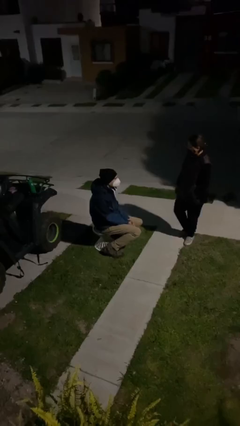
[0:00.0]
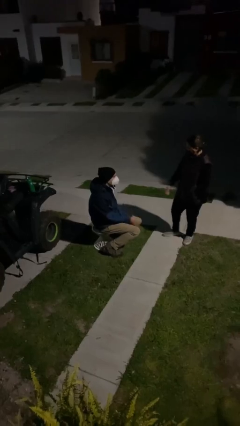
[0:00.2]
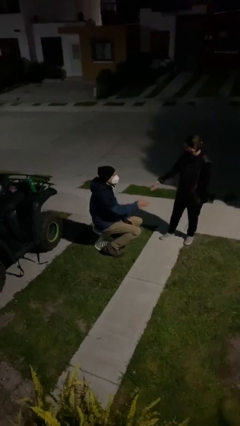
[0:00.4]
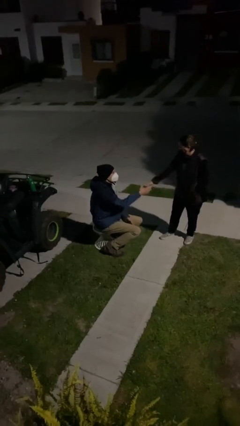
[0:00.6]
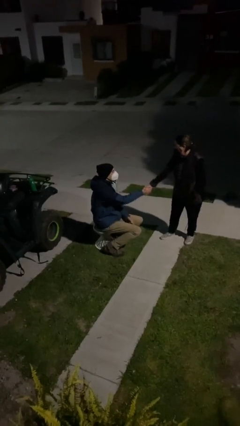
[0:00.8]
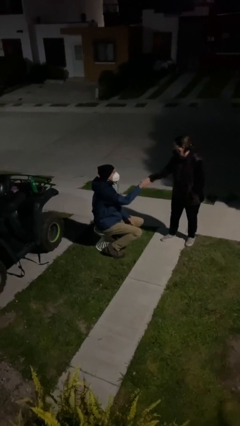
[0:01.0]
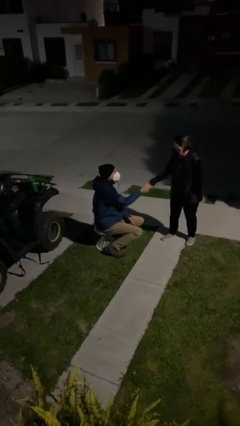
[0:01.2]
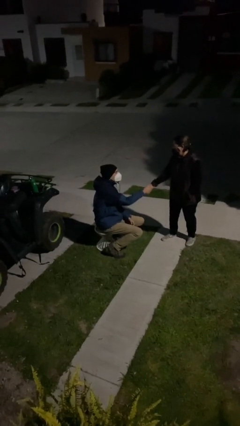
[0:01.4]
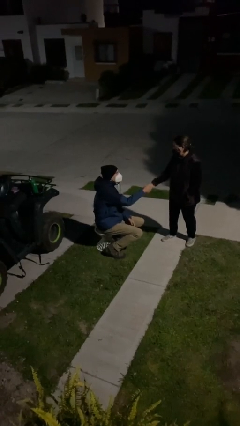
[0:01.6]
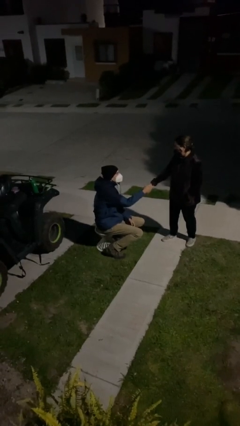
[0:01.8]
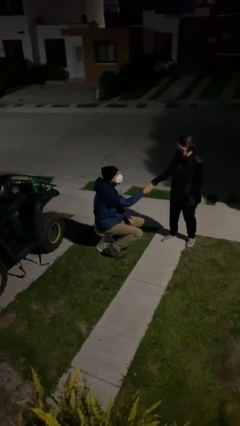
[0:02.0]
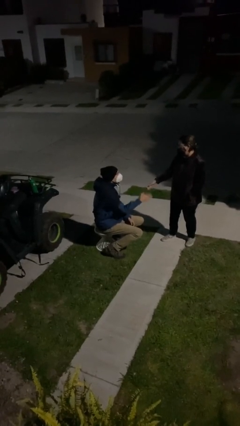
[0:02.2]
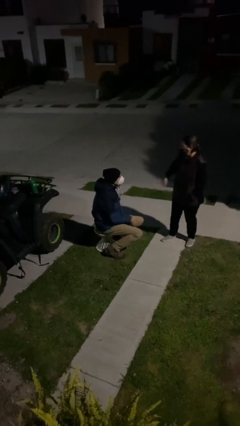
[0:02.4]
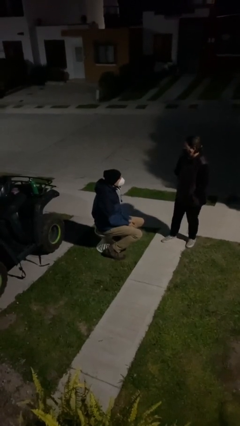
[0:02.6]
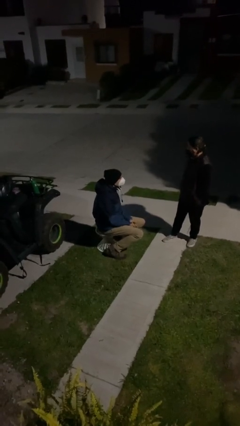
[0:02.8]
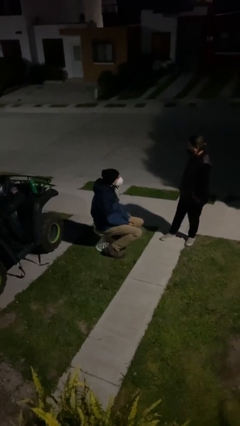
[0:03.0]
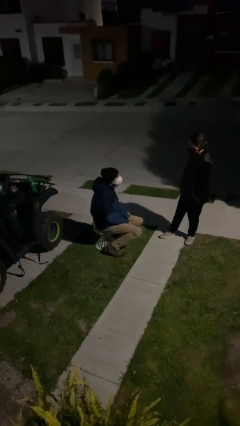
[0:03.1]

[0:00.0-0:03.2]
person shakes hand

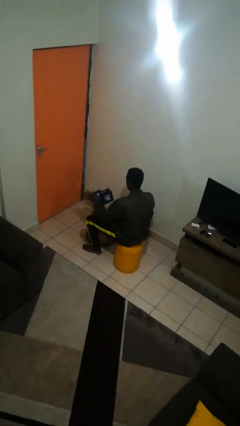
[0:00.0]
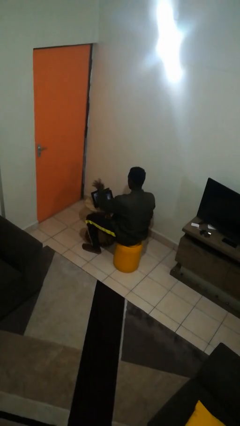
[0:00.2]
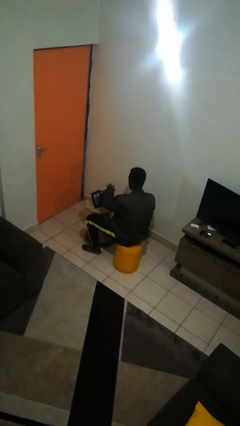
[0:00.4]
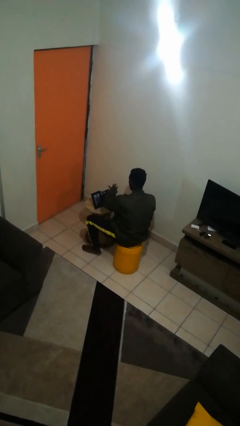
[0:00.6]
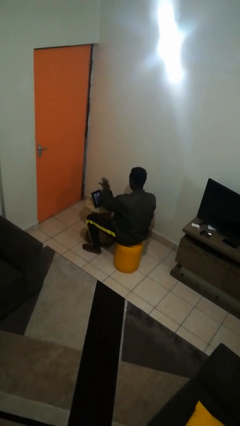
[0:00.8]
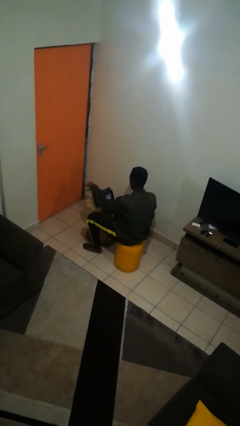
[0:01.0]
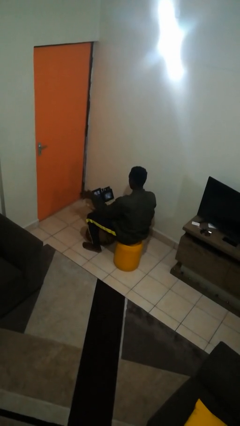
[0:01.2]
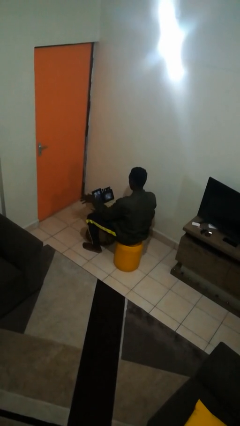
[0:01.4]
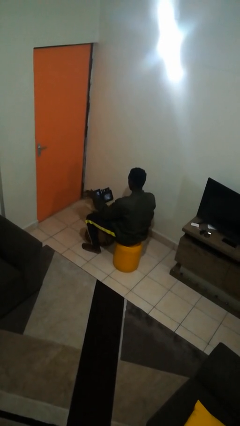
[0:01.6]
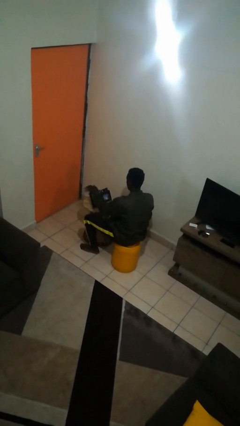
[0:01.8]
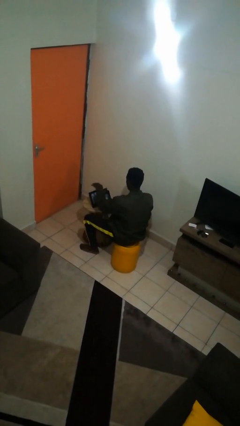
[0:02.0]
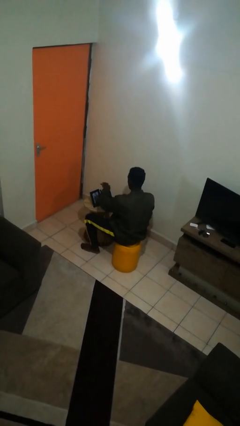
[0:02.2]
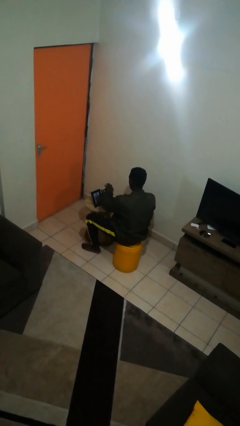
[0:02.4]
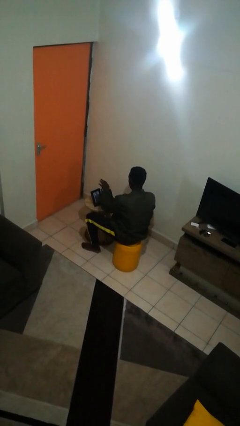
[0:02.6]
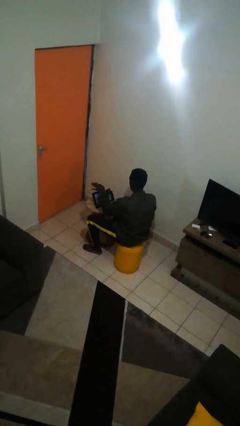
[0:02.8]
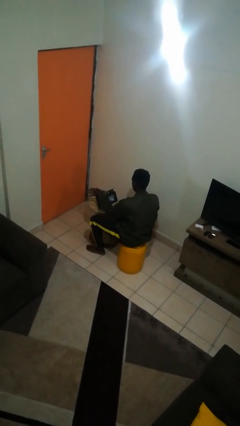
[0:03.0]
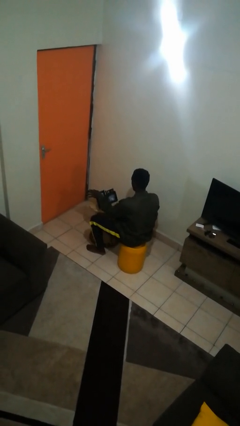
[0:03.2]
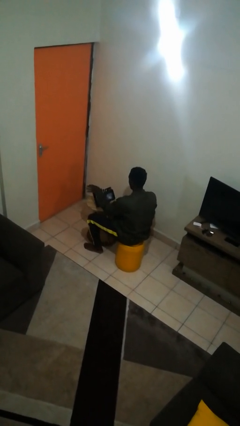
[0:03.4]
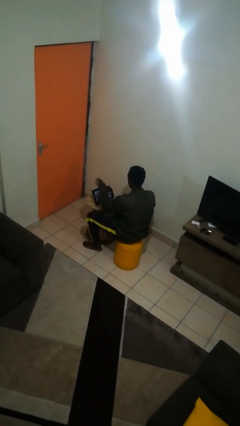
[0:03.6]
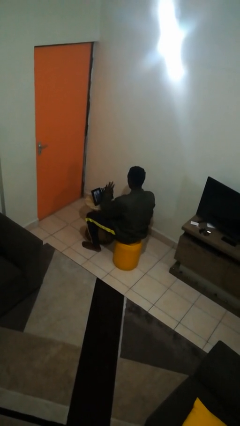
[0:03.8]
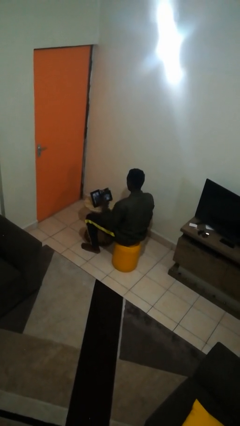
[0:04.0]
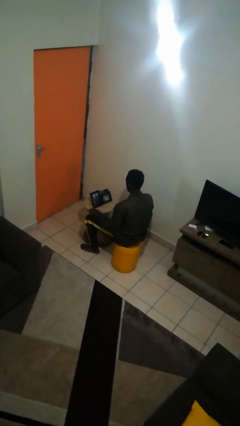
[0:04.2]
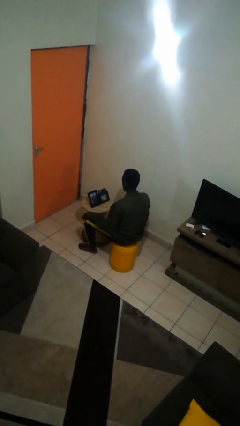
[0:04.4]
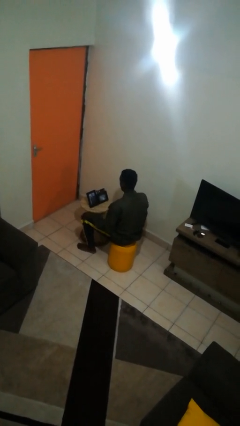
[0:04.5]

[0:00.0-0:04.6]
person waves hand over object

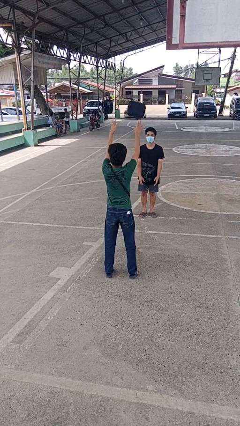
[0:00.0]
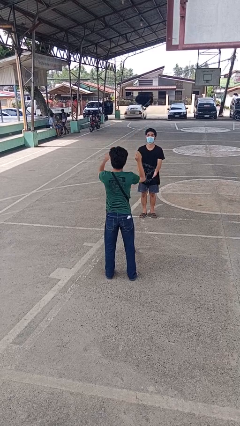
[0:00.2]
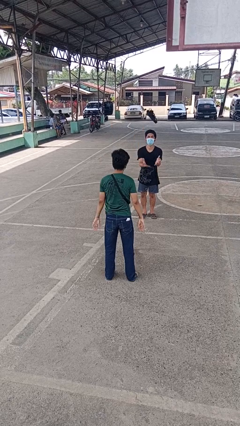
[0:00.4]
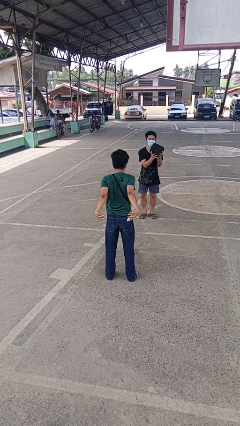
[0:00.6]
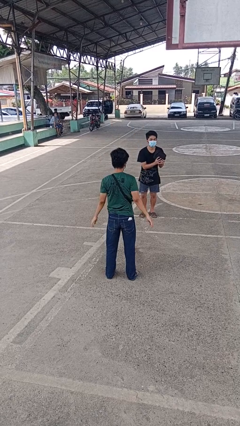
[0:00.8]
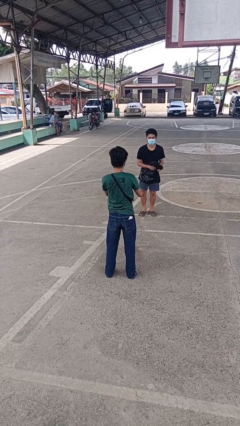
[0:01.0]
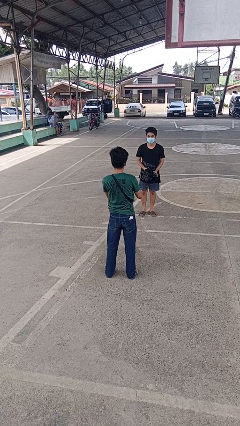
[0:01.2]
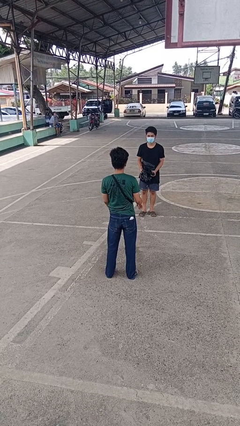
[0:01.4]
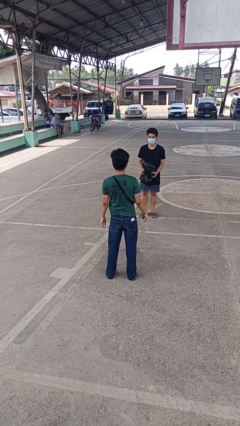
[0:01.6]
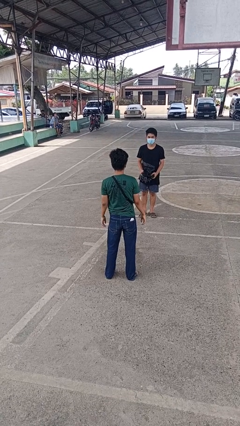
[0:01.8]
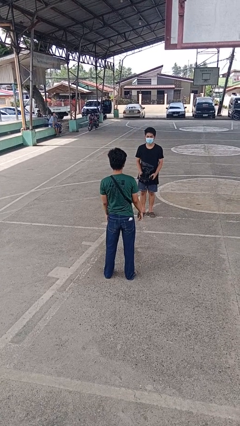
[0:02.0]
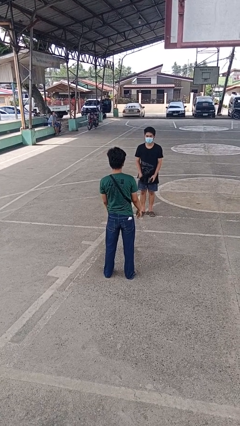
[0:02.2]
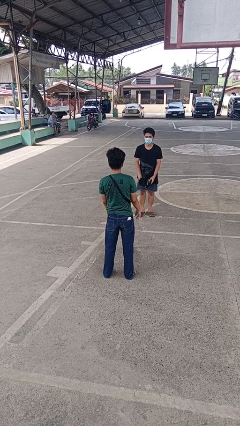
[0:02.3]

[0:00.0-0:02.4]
person throws object to person

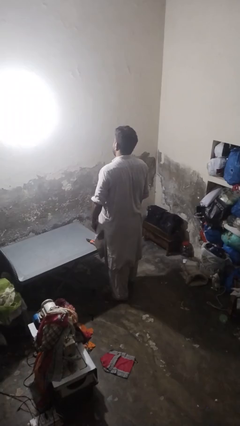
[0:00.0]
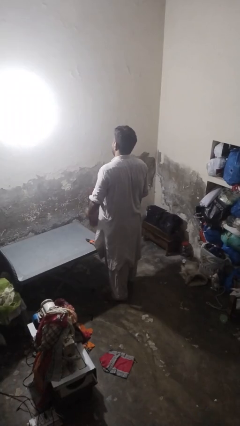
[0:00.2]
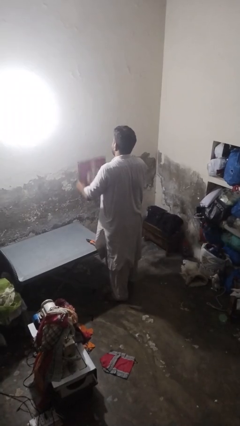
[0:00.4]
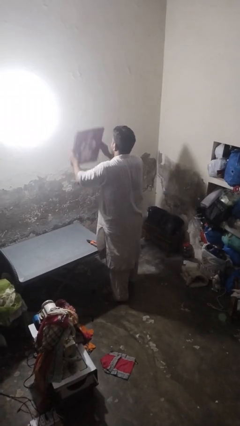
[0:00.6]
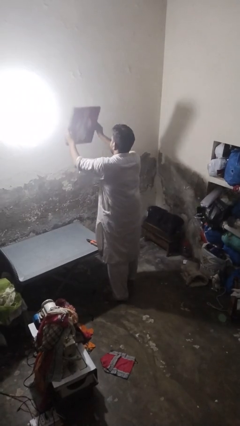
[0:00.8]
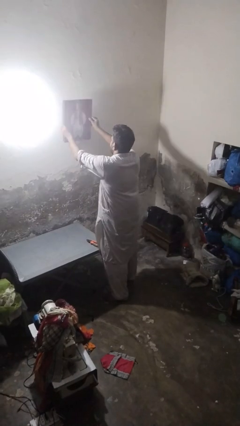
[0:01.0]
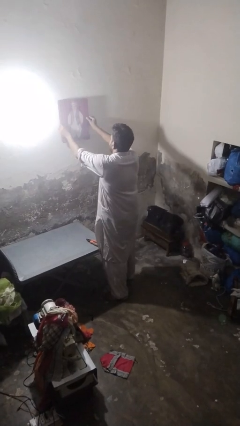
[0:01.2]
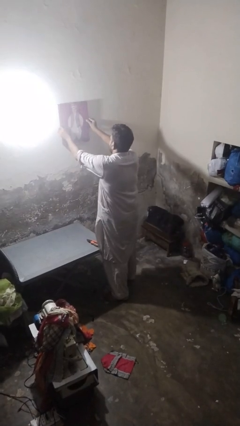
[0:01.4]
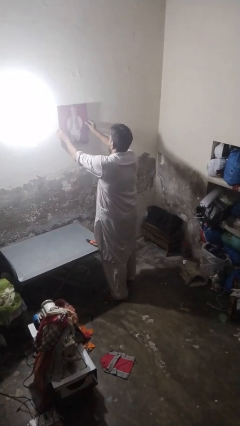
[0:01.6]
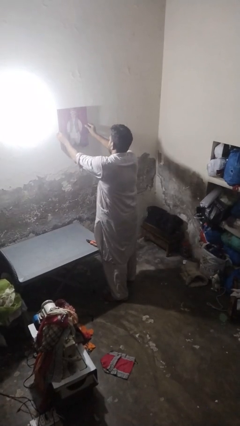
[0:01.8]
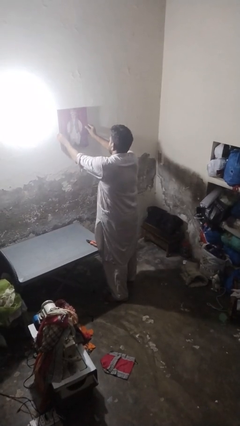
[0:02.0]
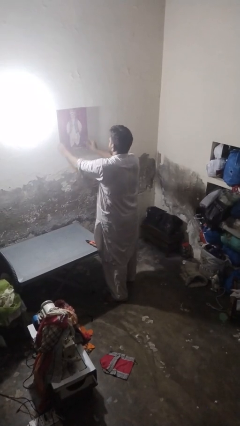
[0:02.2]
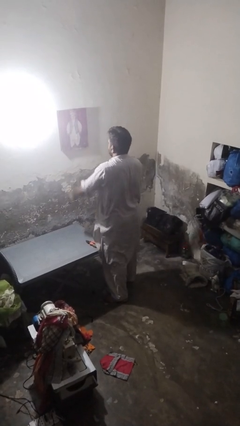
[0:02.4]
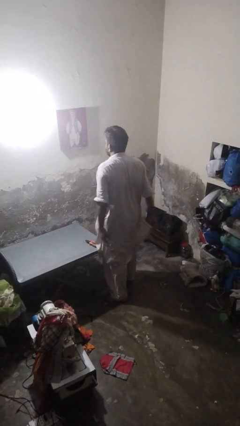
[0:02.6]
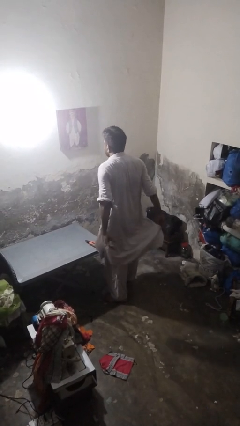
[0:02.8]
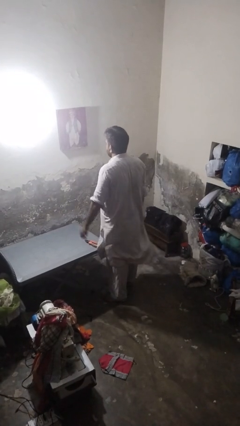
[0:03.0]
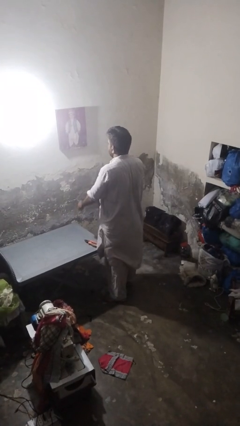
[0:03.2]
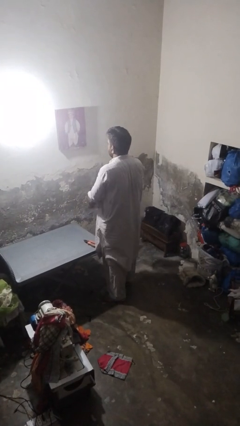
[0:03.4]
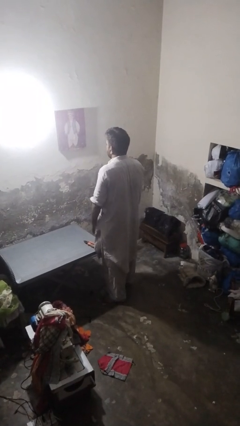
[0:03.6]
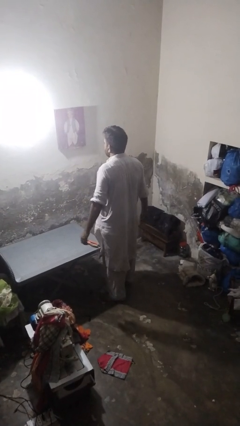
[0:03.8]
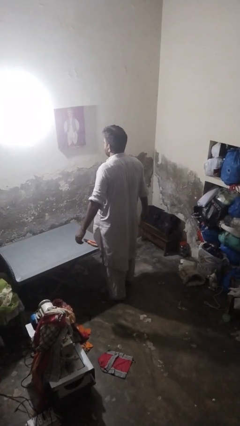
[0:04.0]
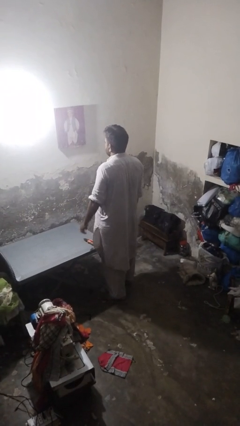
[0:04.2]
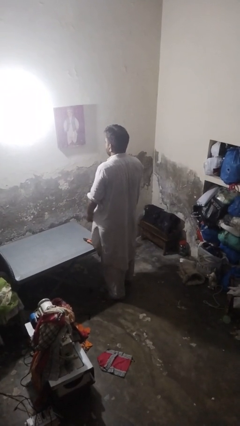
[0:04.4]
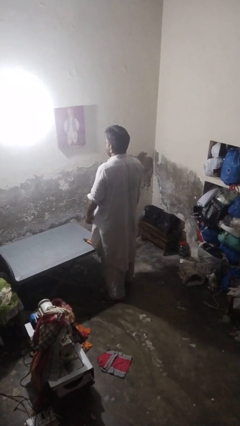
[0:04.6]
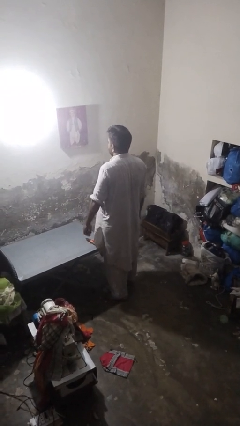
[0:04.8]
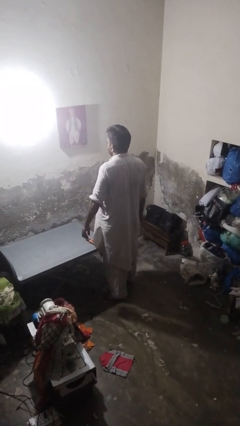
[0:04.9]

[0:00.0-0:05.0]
person puts up picture frame

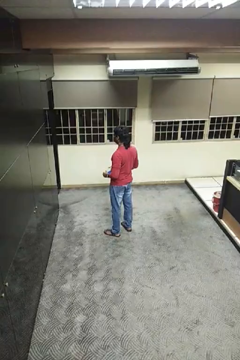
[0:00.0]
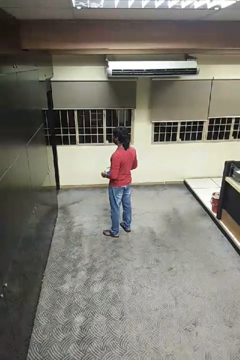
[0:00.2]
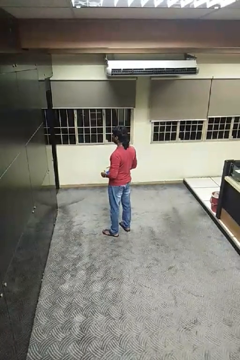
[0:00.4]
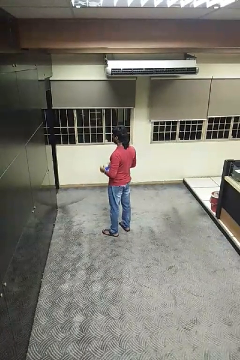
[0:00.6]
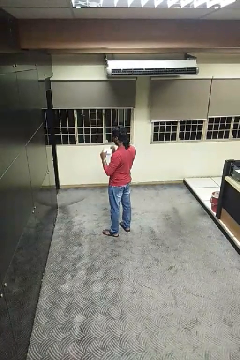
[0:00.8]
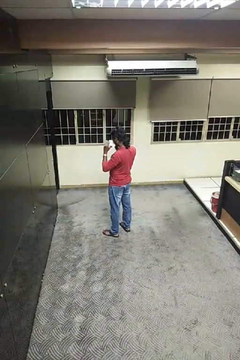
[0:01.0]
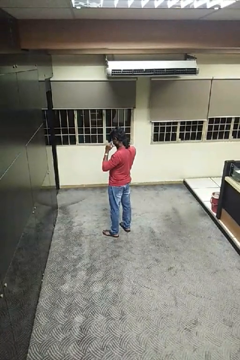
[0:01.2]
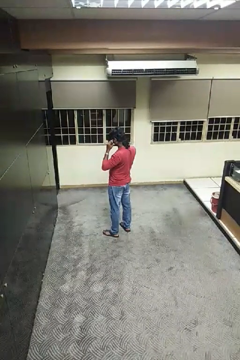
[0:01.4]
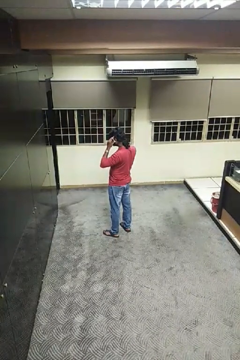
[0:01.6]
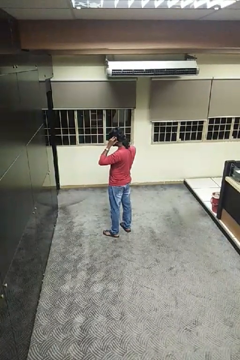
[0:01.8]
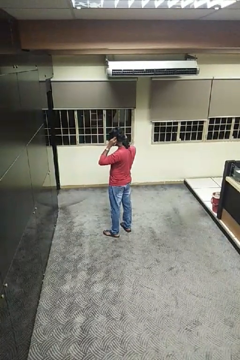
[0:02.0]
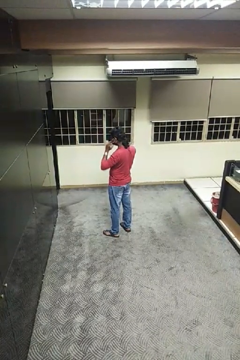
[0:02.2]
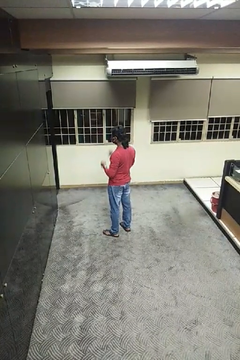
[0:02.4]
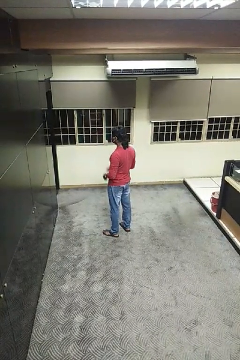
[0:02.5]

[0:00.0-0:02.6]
person puts on facemask
